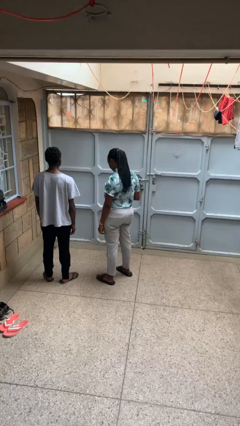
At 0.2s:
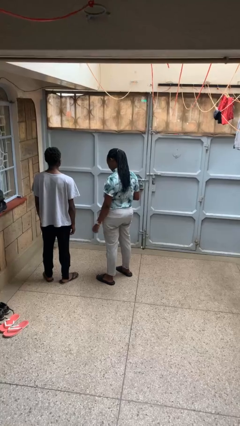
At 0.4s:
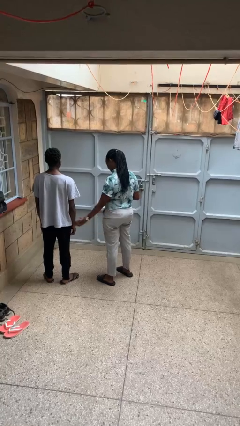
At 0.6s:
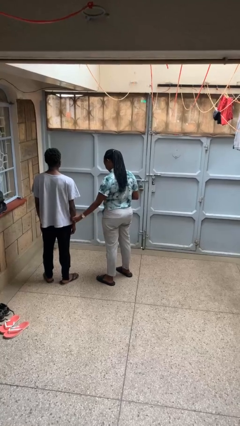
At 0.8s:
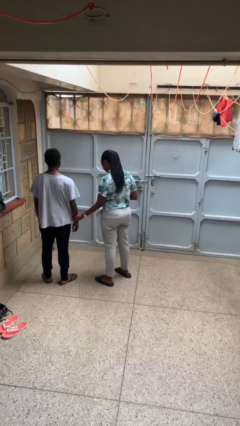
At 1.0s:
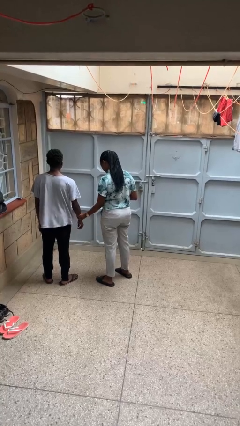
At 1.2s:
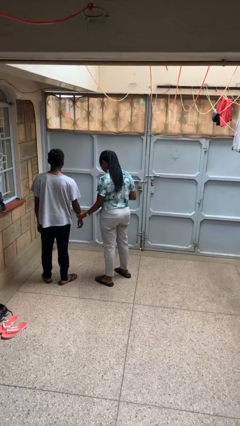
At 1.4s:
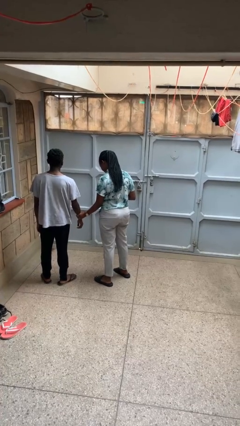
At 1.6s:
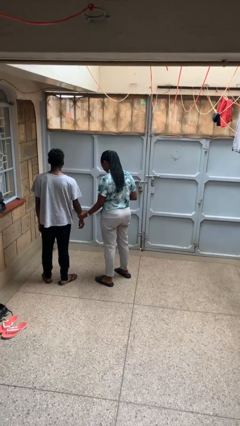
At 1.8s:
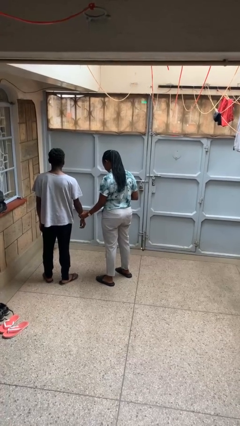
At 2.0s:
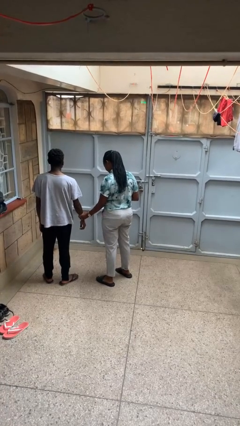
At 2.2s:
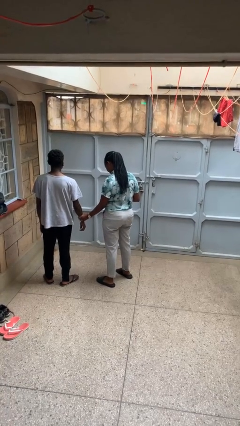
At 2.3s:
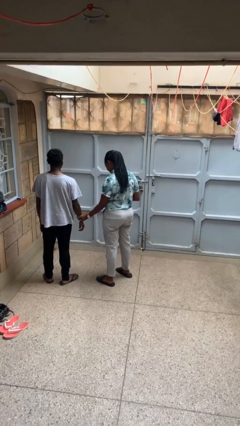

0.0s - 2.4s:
person grabs person by forearm

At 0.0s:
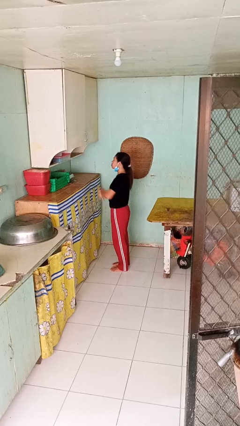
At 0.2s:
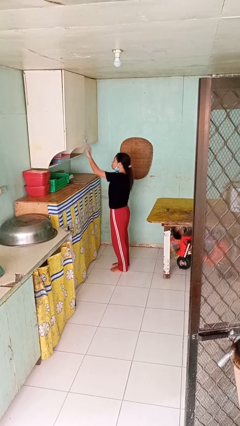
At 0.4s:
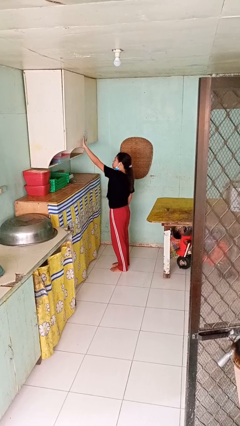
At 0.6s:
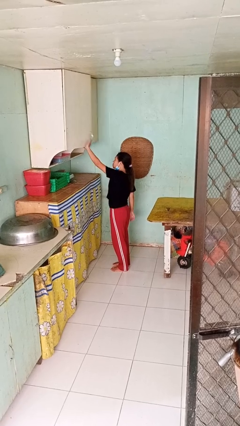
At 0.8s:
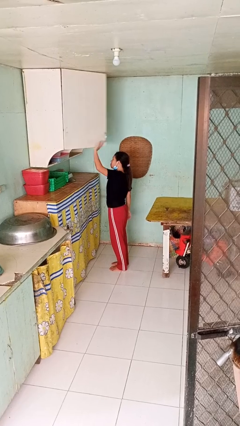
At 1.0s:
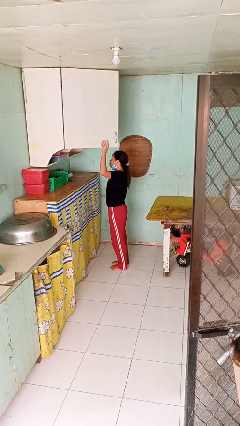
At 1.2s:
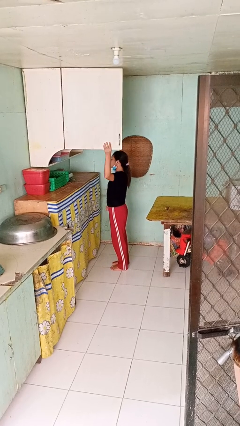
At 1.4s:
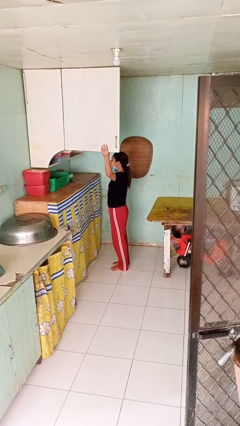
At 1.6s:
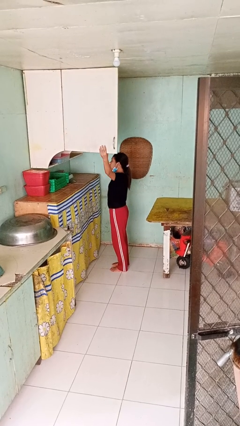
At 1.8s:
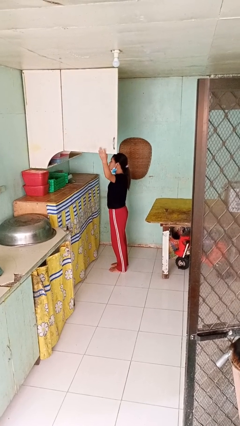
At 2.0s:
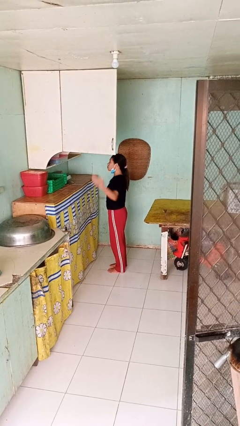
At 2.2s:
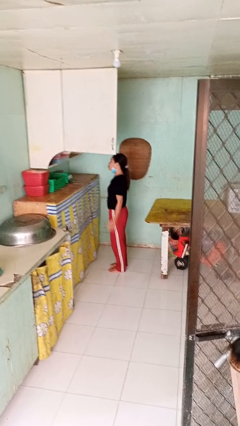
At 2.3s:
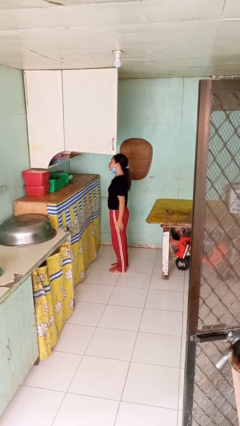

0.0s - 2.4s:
person opens cabinet

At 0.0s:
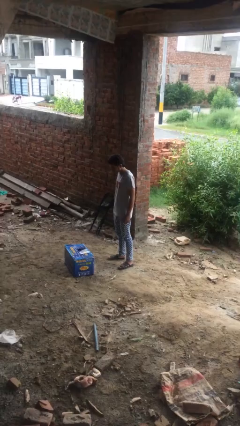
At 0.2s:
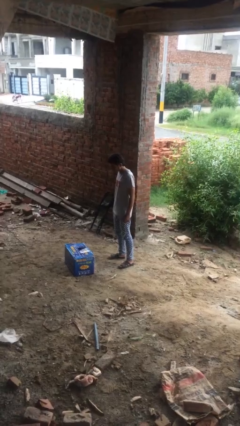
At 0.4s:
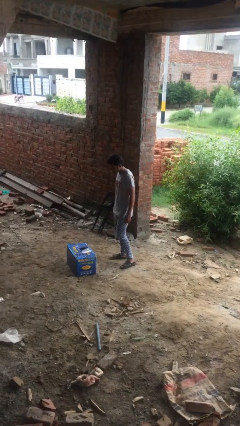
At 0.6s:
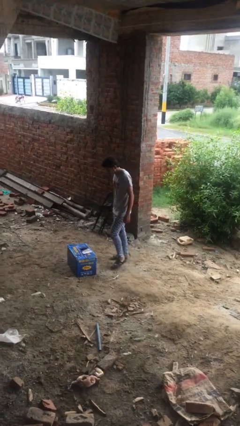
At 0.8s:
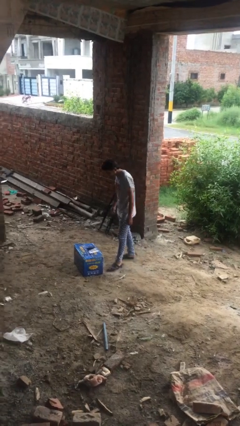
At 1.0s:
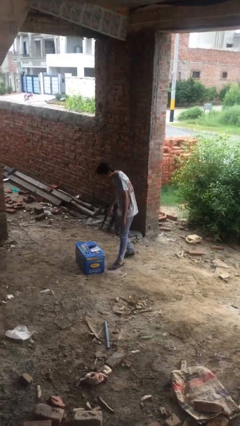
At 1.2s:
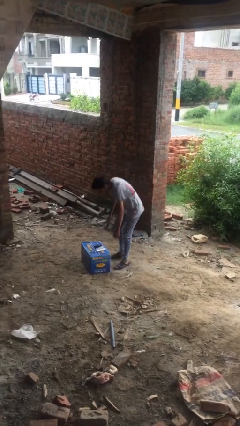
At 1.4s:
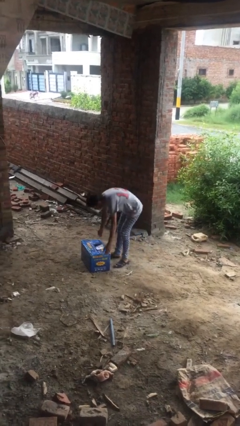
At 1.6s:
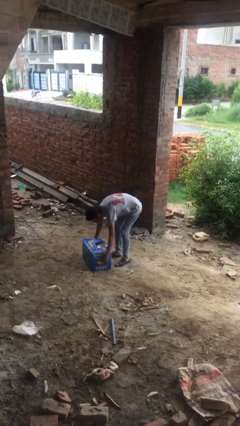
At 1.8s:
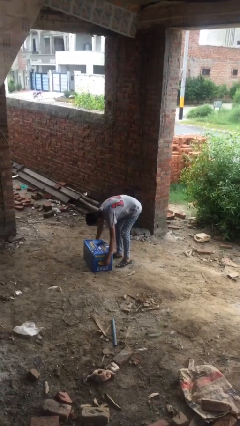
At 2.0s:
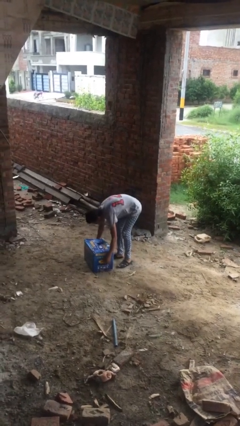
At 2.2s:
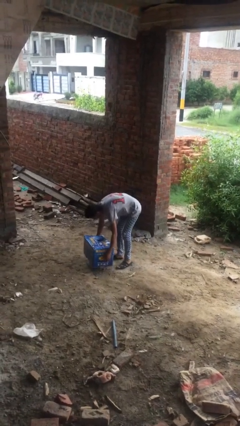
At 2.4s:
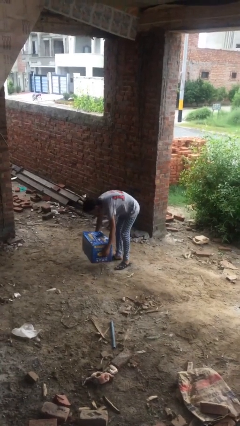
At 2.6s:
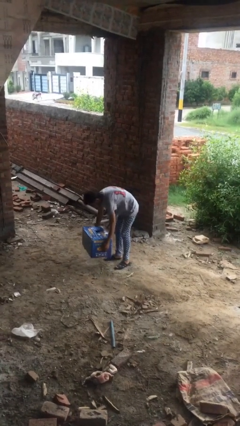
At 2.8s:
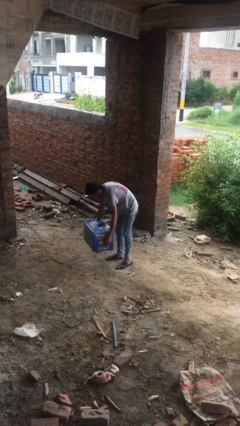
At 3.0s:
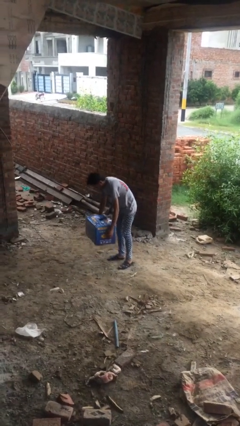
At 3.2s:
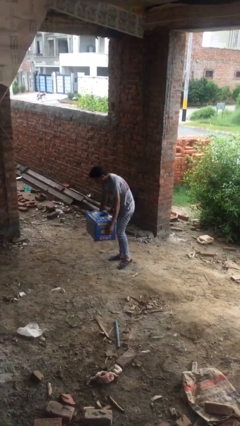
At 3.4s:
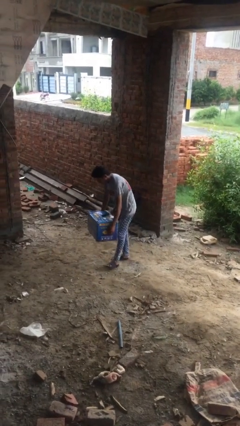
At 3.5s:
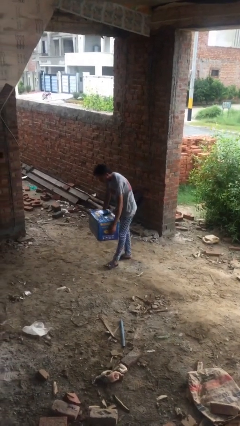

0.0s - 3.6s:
person picks up object from floor

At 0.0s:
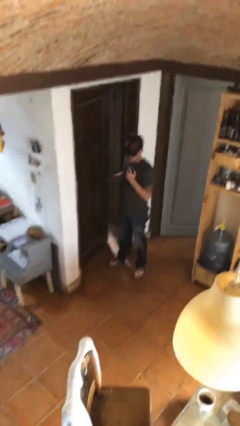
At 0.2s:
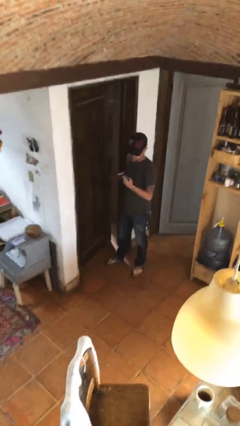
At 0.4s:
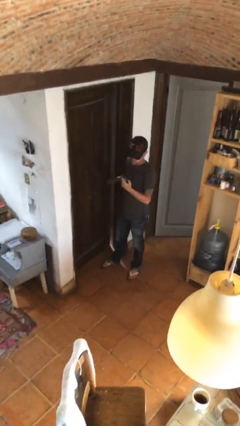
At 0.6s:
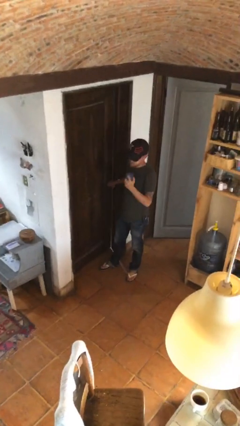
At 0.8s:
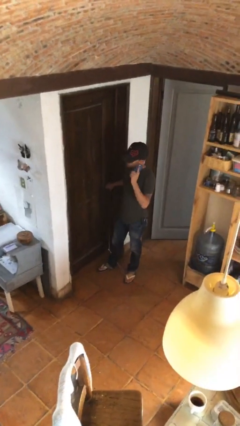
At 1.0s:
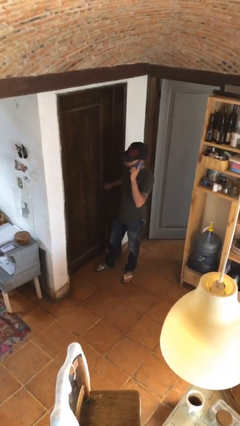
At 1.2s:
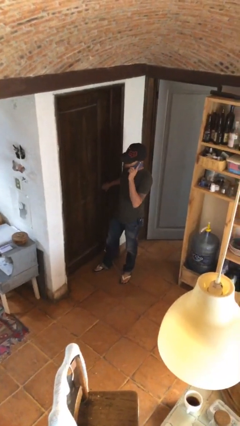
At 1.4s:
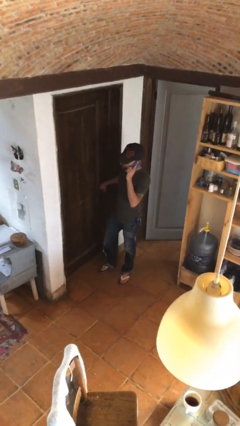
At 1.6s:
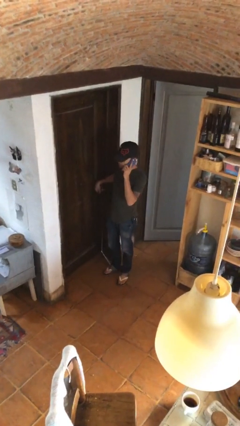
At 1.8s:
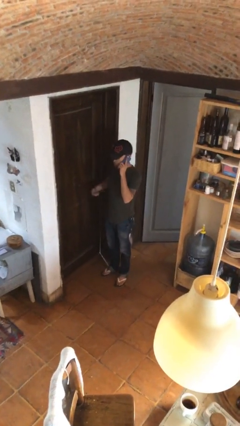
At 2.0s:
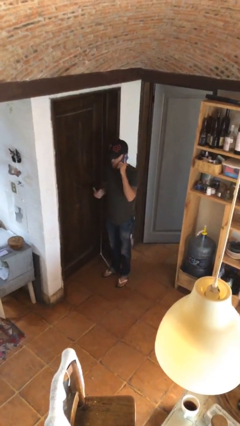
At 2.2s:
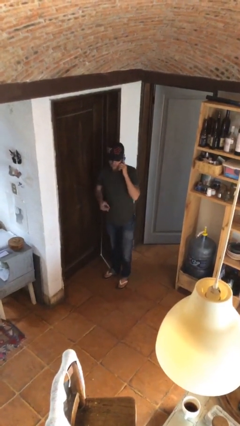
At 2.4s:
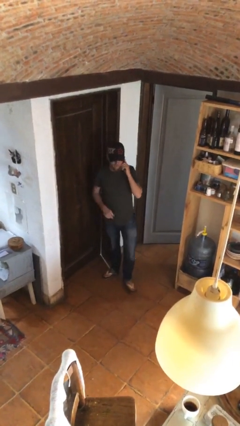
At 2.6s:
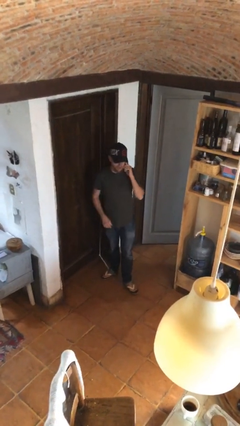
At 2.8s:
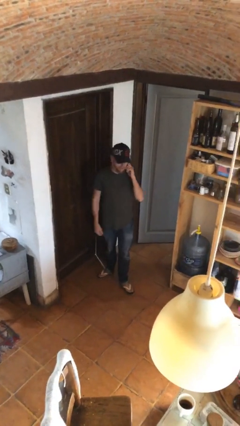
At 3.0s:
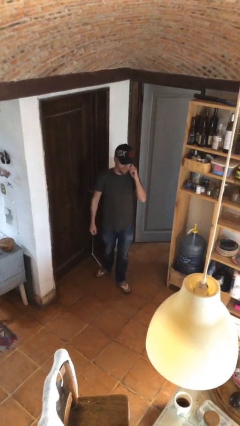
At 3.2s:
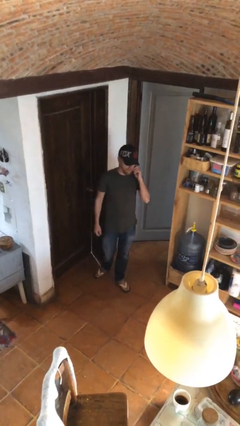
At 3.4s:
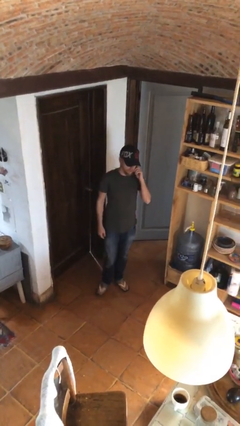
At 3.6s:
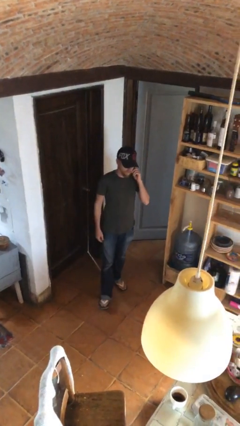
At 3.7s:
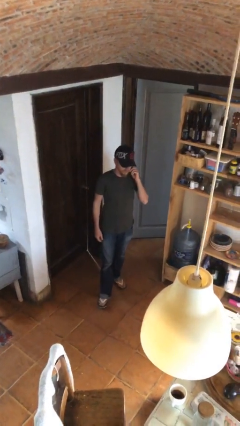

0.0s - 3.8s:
person closes facility door

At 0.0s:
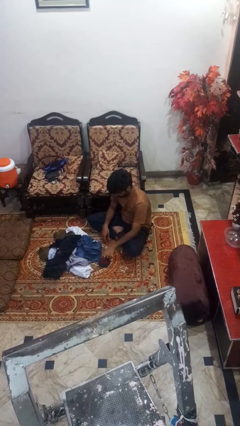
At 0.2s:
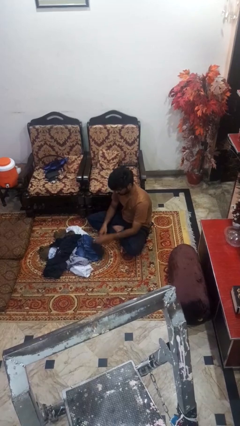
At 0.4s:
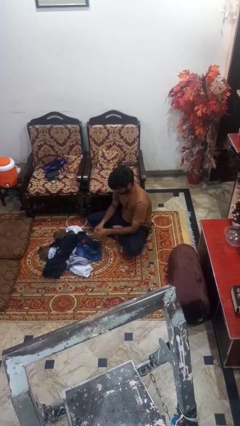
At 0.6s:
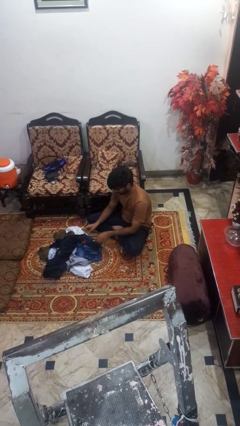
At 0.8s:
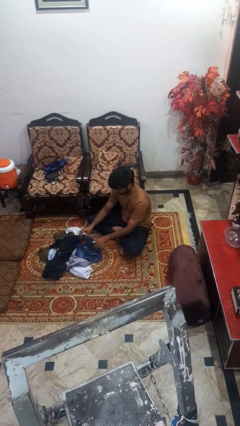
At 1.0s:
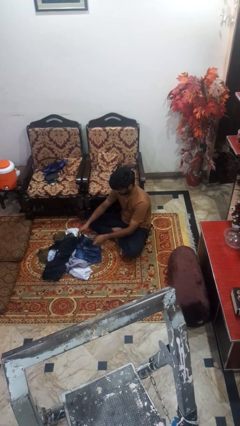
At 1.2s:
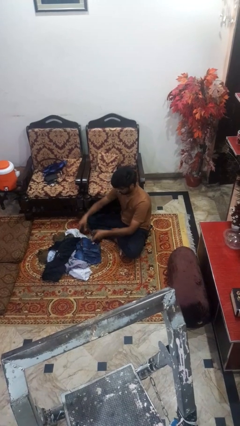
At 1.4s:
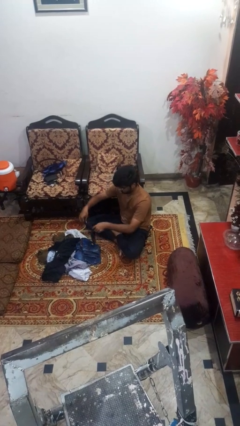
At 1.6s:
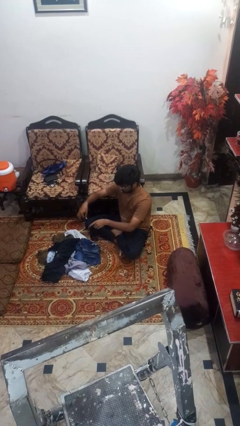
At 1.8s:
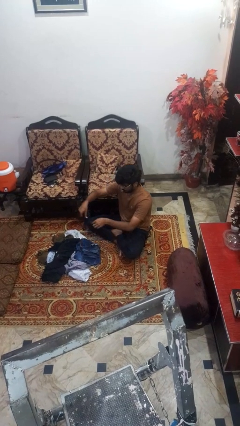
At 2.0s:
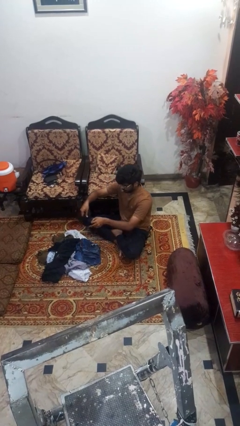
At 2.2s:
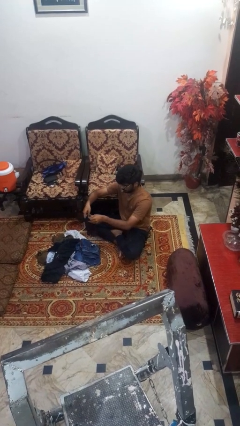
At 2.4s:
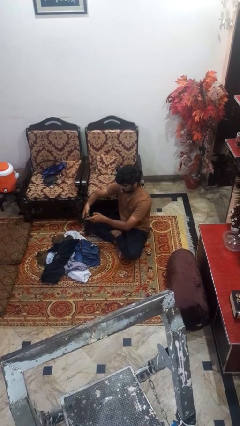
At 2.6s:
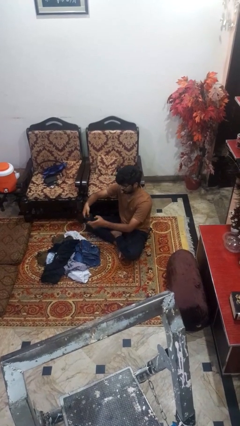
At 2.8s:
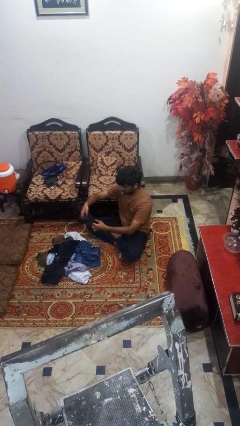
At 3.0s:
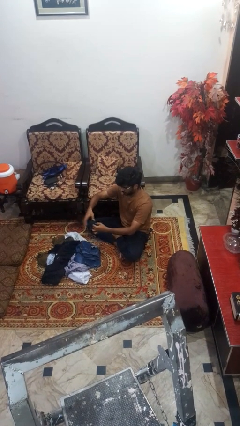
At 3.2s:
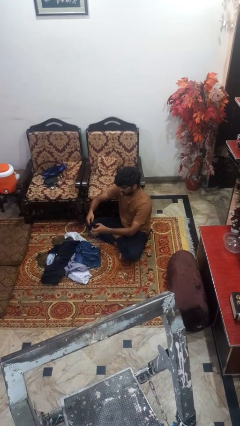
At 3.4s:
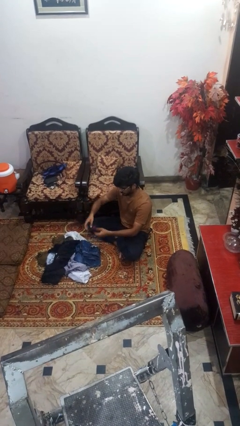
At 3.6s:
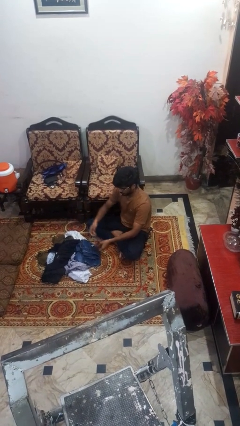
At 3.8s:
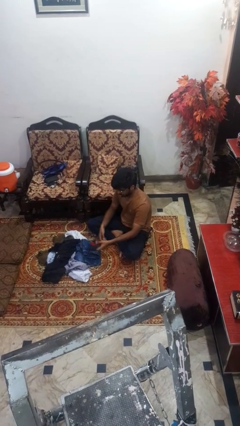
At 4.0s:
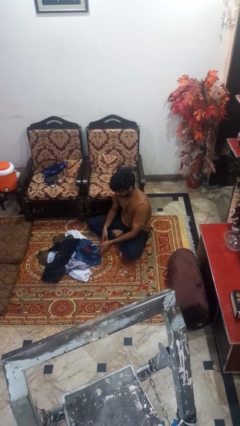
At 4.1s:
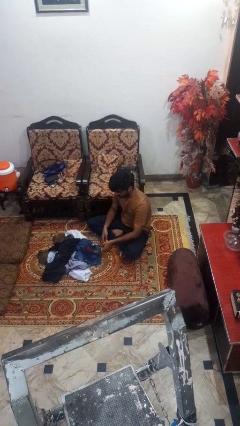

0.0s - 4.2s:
person folds socks

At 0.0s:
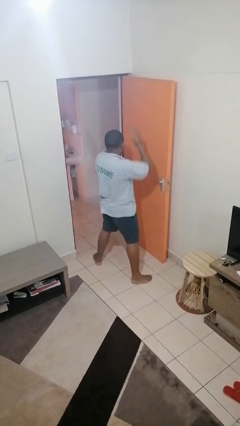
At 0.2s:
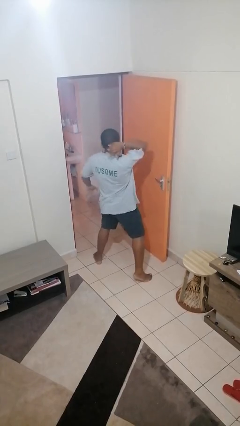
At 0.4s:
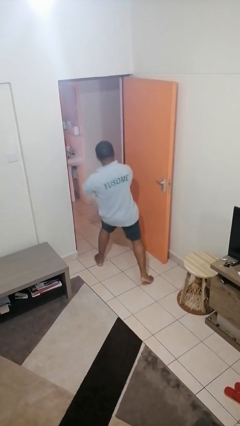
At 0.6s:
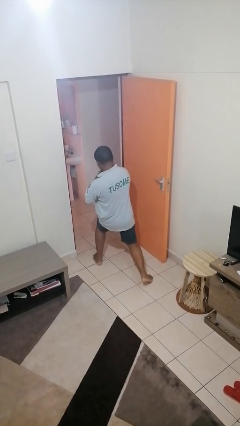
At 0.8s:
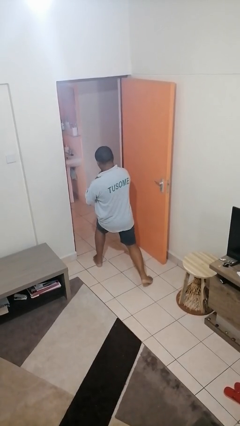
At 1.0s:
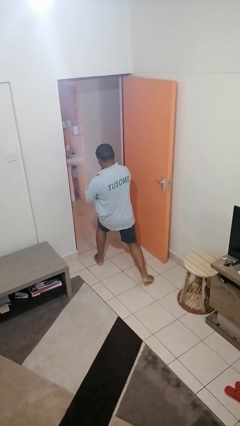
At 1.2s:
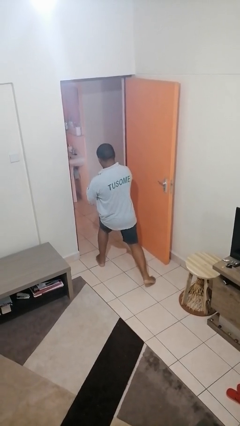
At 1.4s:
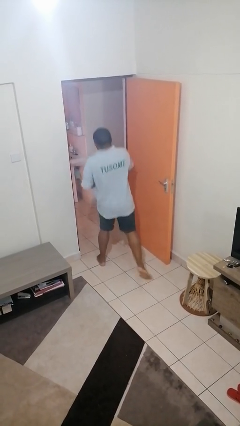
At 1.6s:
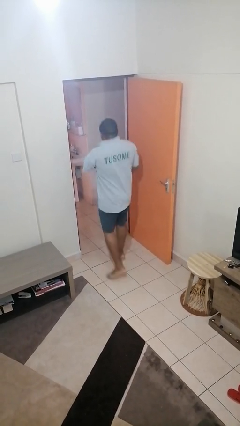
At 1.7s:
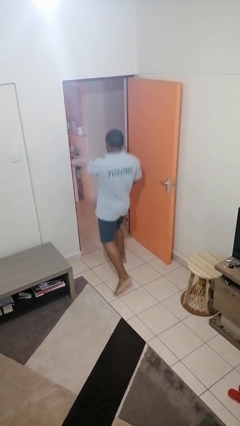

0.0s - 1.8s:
person karate chop
